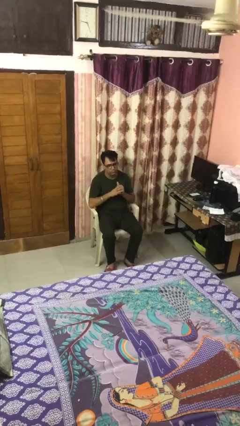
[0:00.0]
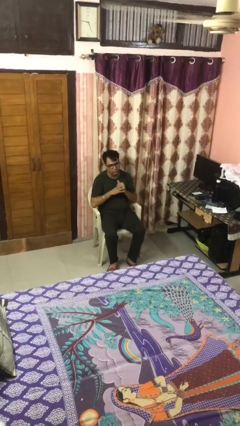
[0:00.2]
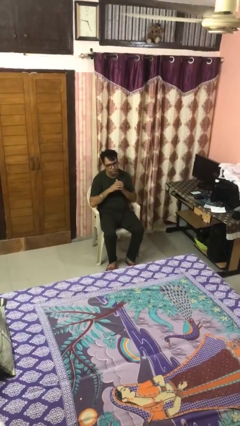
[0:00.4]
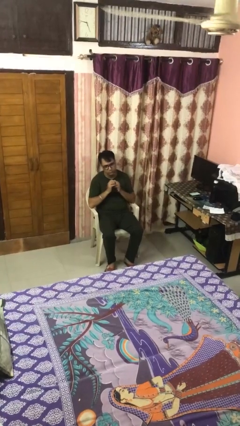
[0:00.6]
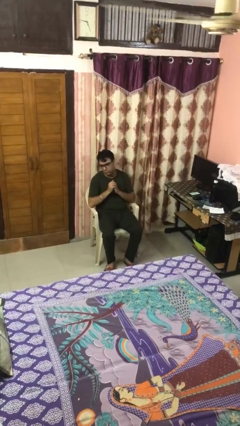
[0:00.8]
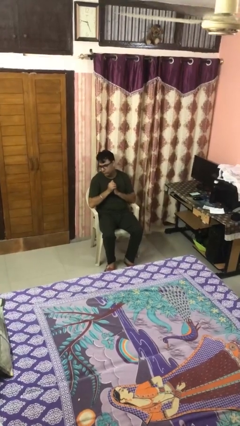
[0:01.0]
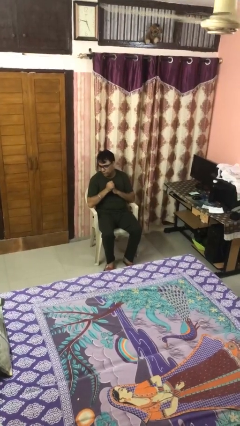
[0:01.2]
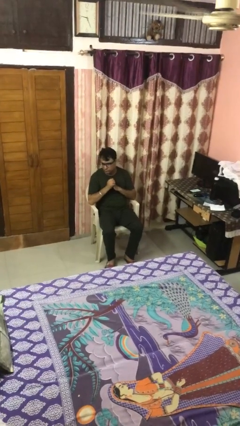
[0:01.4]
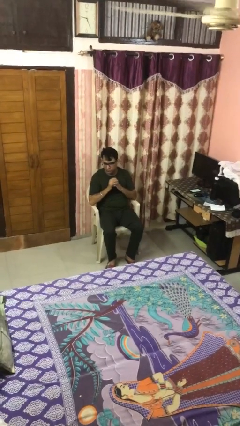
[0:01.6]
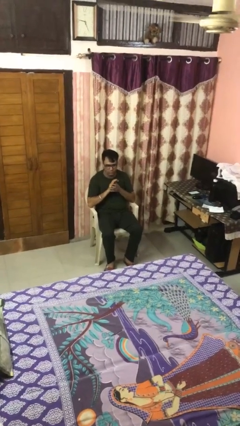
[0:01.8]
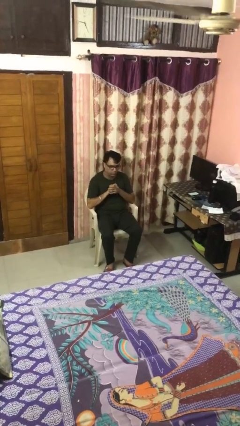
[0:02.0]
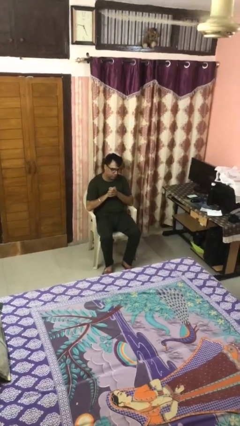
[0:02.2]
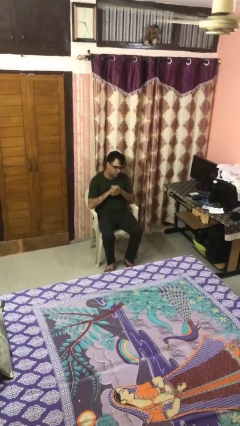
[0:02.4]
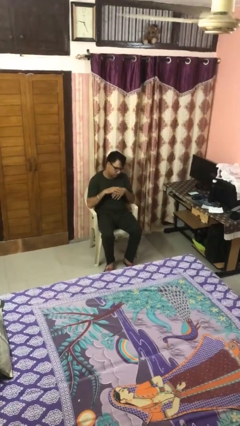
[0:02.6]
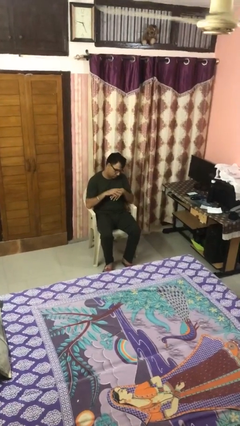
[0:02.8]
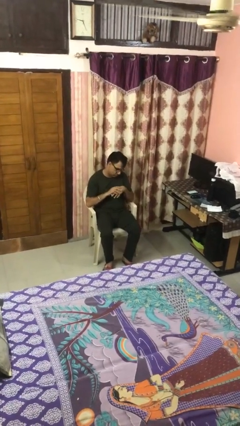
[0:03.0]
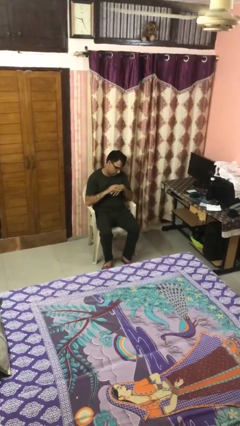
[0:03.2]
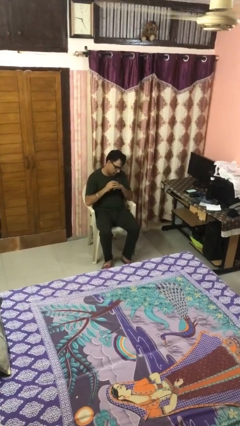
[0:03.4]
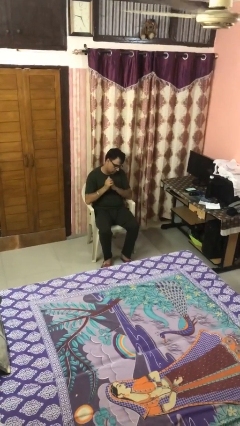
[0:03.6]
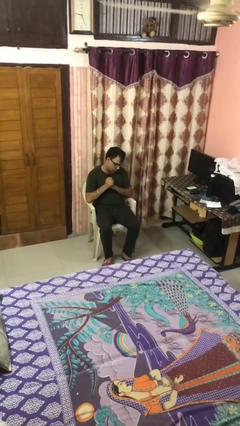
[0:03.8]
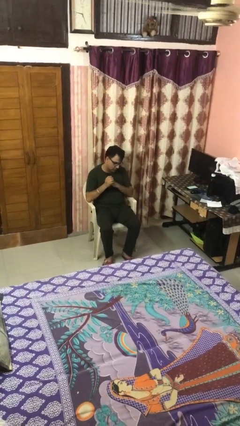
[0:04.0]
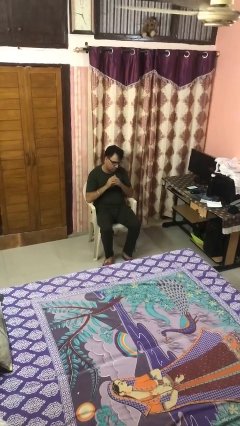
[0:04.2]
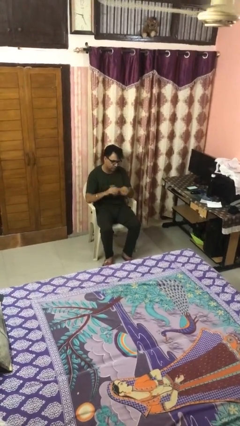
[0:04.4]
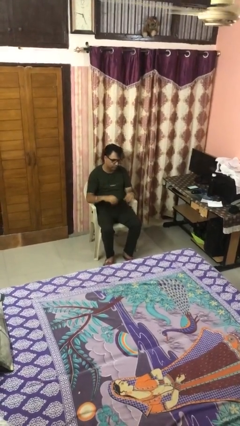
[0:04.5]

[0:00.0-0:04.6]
person cracks knuckles

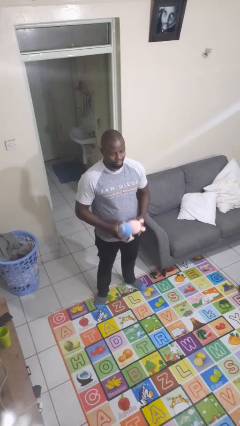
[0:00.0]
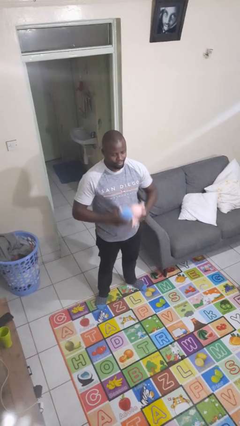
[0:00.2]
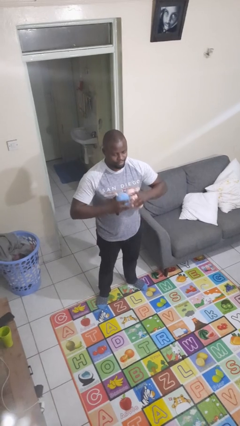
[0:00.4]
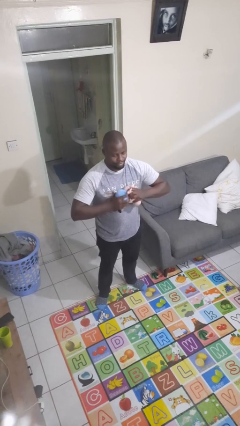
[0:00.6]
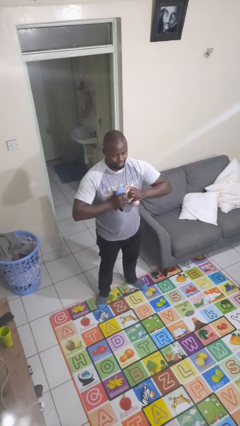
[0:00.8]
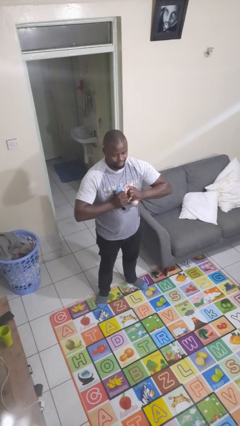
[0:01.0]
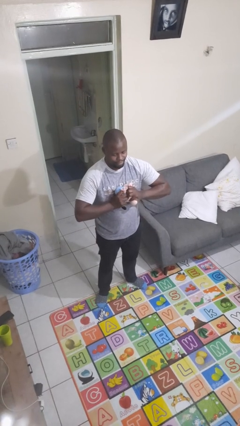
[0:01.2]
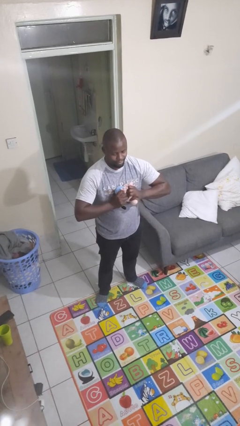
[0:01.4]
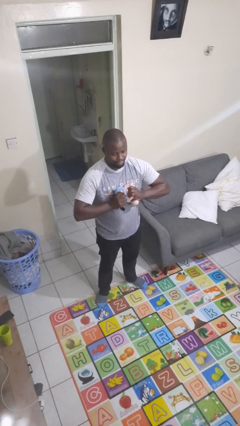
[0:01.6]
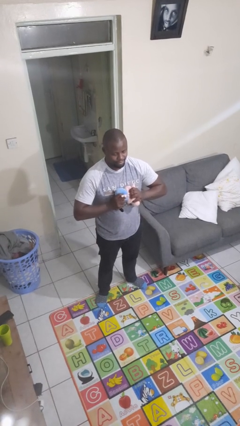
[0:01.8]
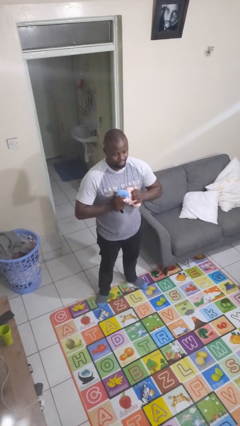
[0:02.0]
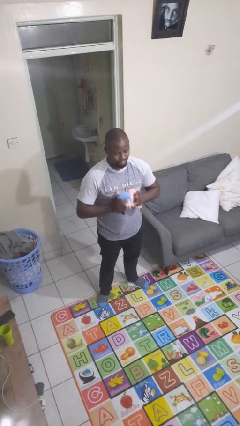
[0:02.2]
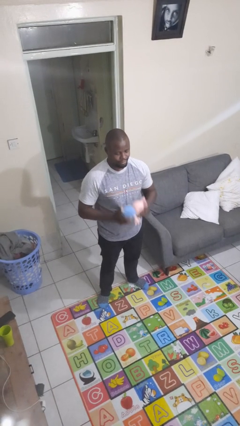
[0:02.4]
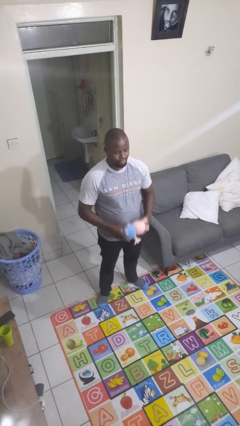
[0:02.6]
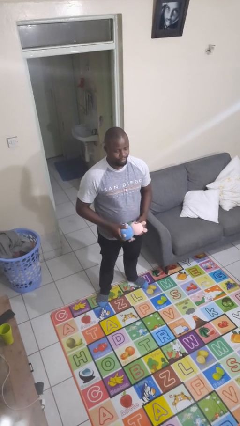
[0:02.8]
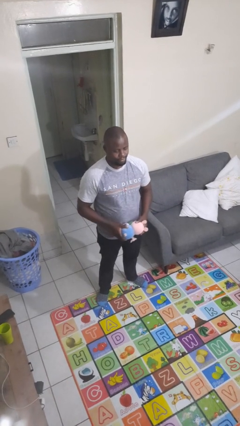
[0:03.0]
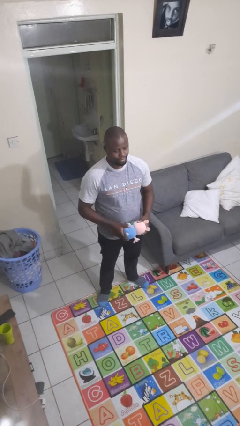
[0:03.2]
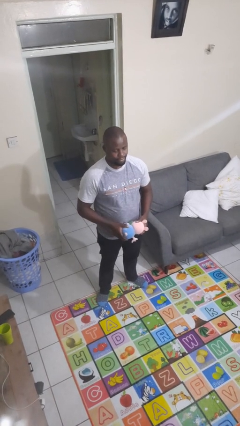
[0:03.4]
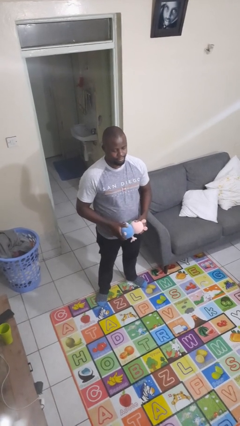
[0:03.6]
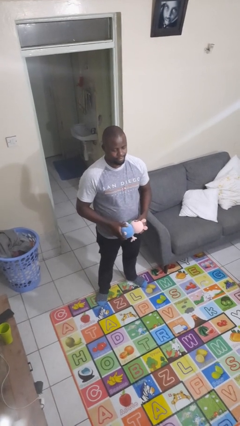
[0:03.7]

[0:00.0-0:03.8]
person squeezes object

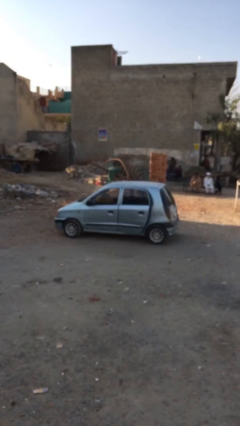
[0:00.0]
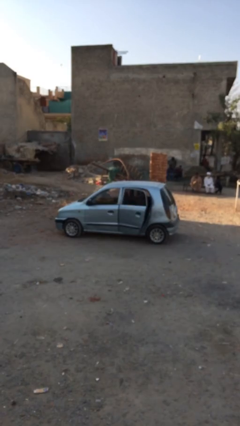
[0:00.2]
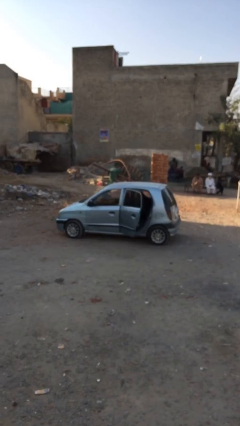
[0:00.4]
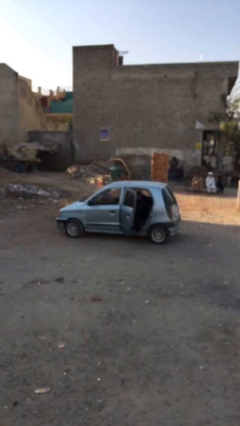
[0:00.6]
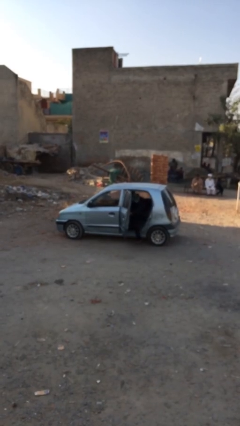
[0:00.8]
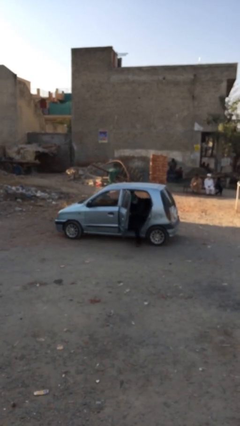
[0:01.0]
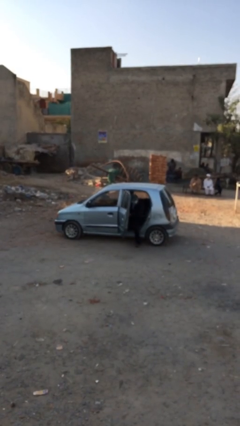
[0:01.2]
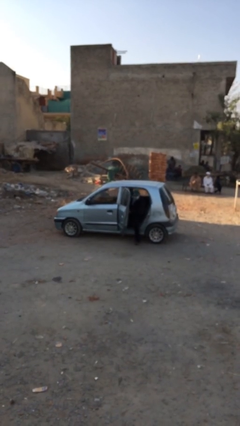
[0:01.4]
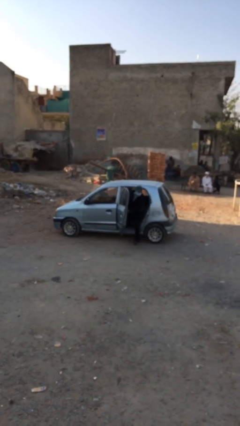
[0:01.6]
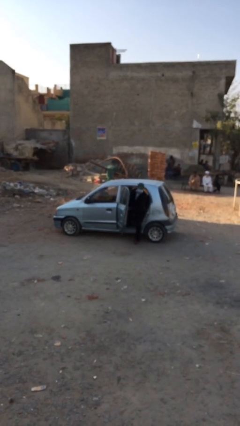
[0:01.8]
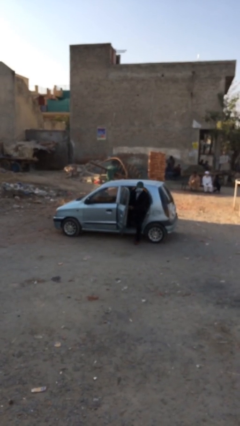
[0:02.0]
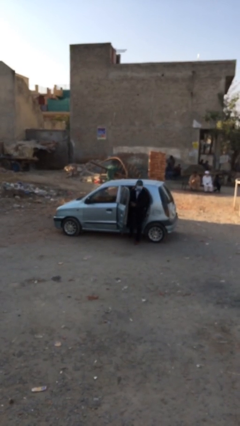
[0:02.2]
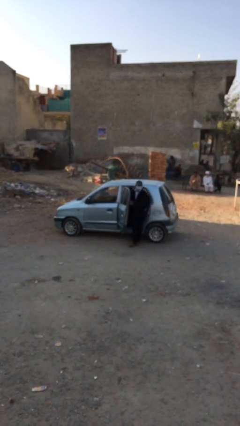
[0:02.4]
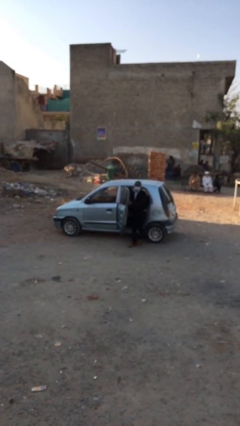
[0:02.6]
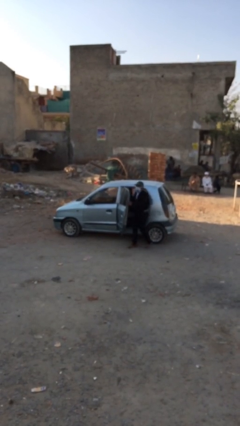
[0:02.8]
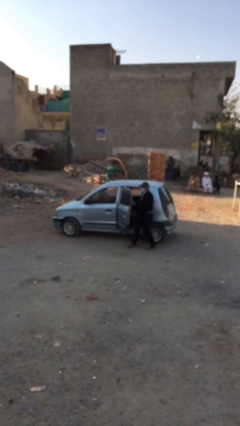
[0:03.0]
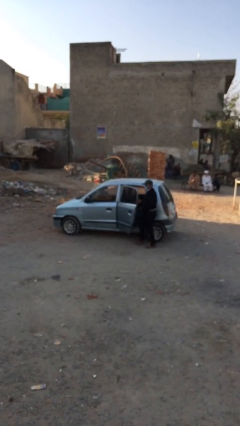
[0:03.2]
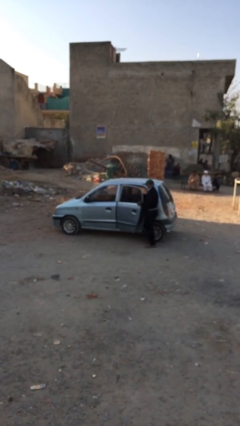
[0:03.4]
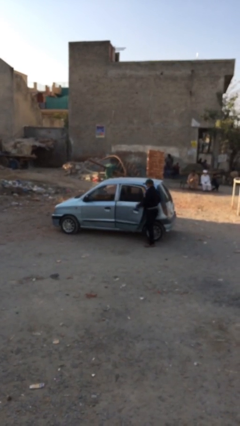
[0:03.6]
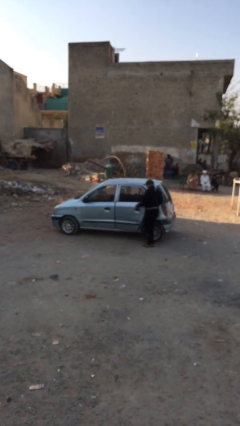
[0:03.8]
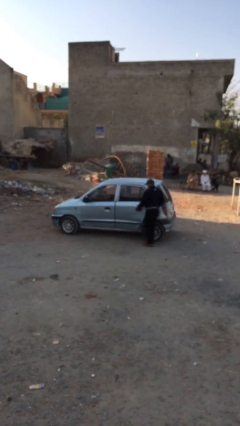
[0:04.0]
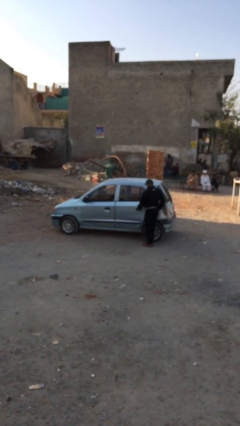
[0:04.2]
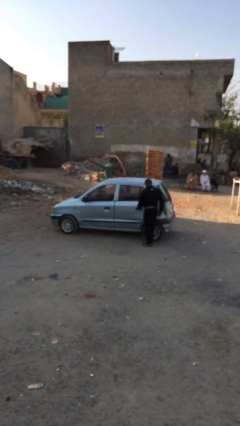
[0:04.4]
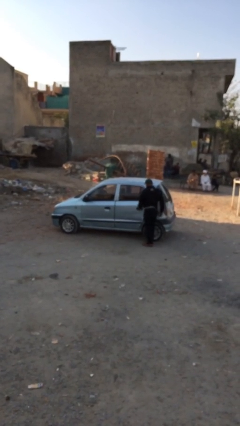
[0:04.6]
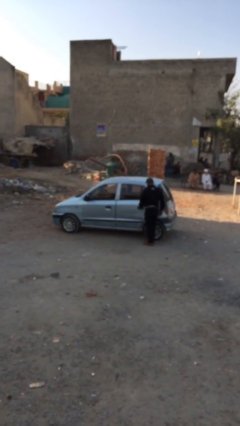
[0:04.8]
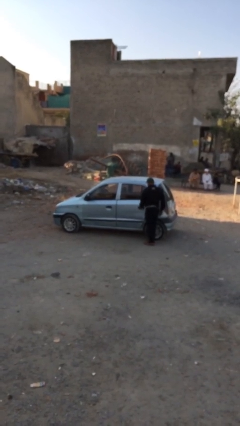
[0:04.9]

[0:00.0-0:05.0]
car drops off person

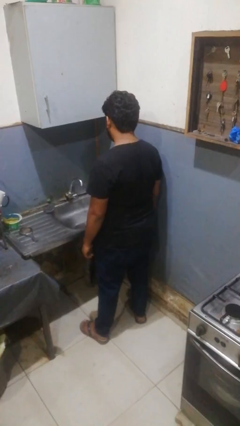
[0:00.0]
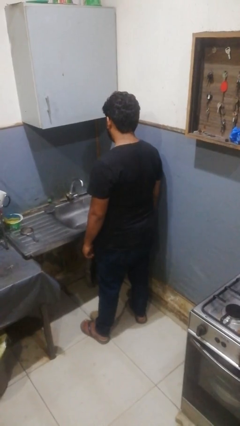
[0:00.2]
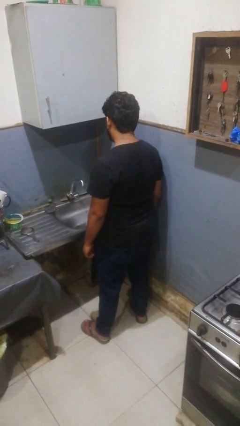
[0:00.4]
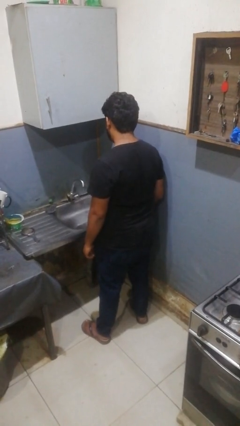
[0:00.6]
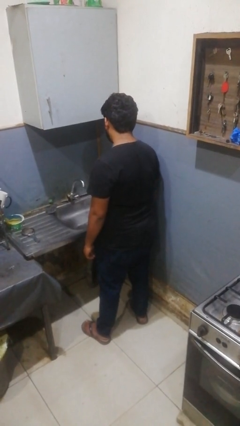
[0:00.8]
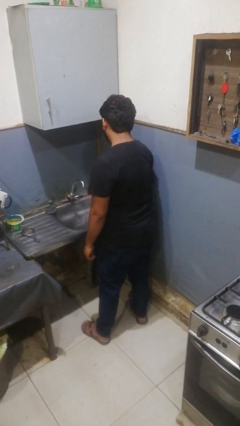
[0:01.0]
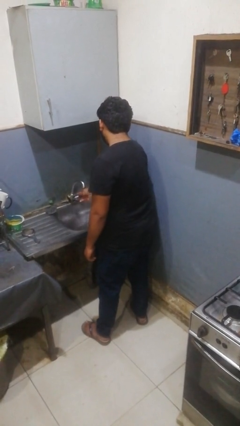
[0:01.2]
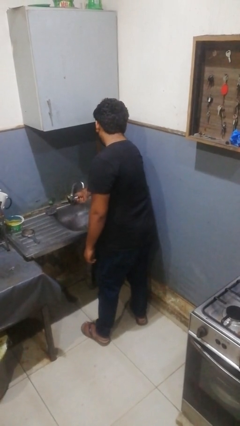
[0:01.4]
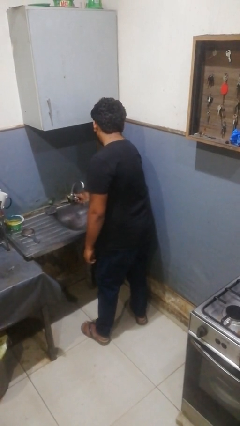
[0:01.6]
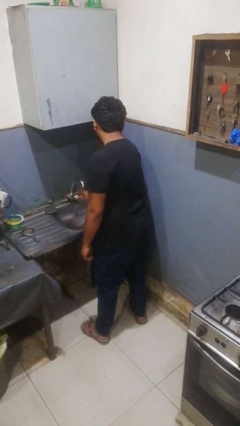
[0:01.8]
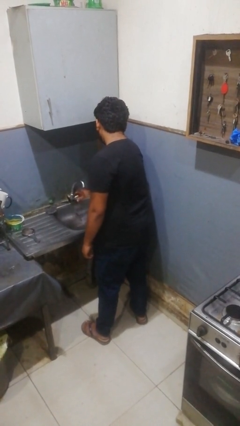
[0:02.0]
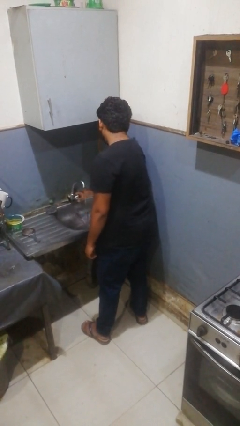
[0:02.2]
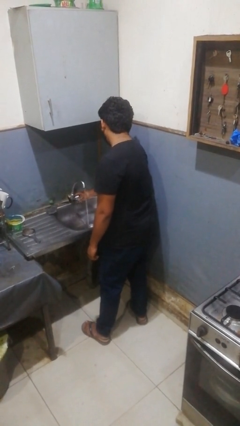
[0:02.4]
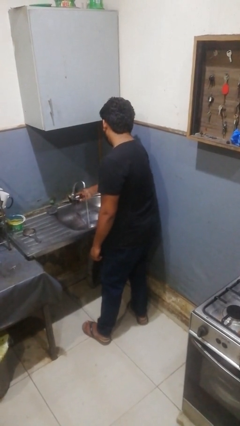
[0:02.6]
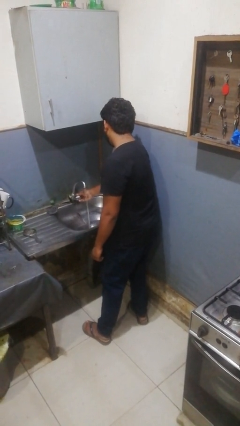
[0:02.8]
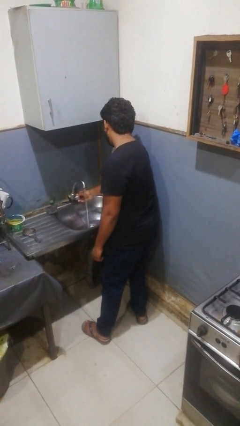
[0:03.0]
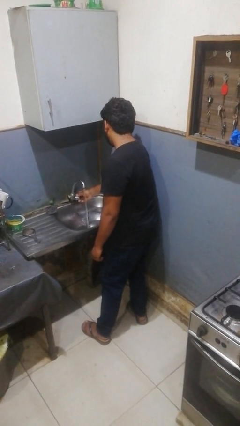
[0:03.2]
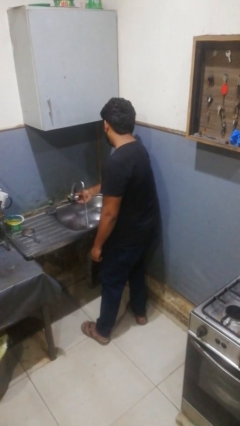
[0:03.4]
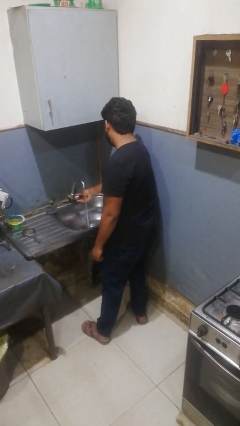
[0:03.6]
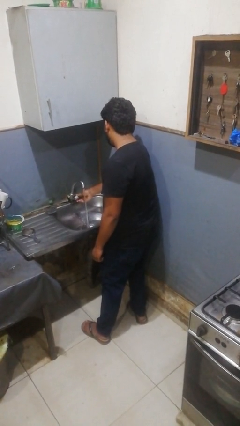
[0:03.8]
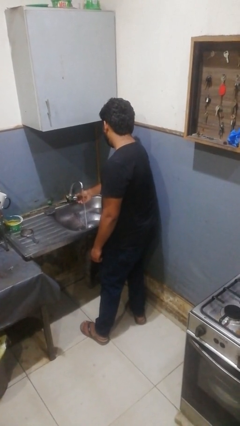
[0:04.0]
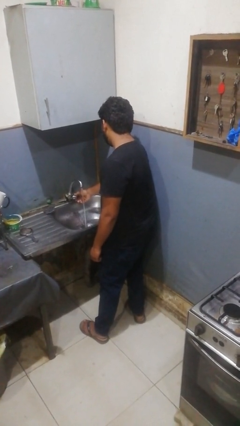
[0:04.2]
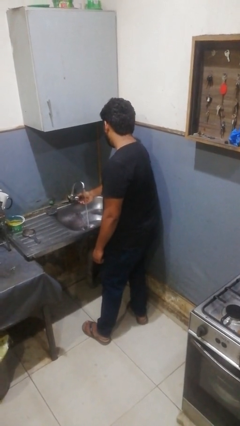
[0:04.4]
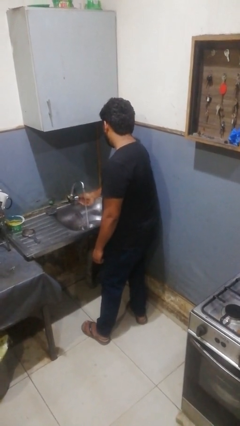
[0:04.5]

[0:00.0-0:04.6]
person turns on faucet

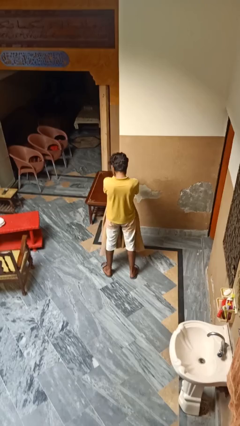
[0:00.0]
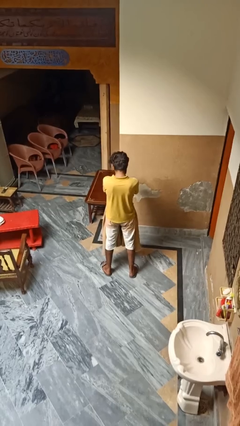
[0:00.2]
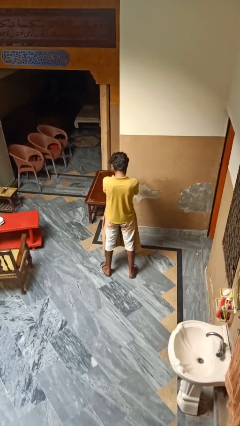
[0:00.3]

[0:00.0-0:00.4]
person unfolds blanket
